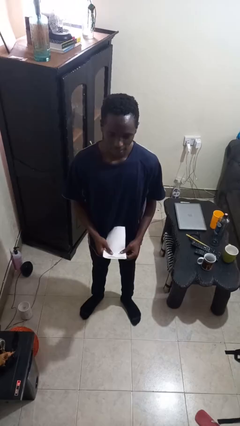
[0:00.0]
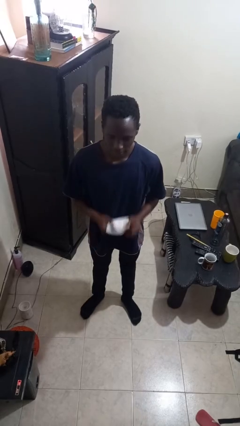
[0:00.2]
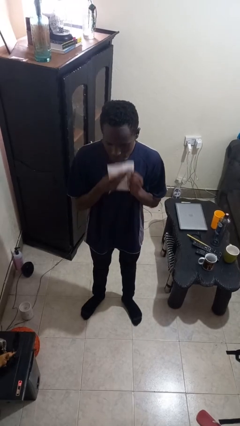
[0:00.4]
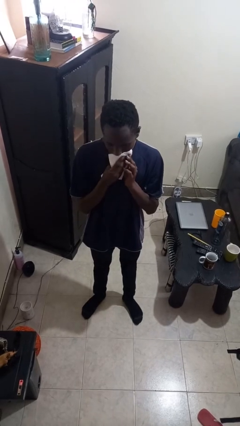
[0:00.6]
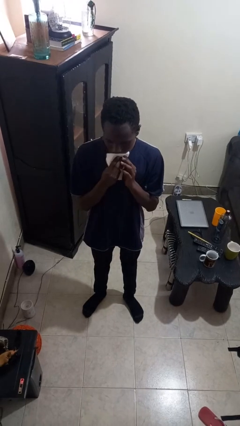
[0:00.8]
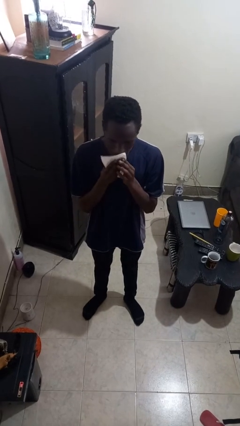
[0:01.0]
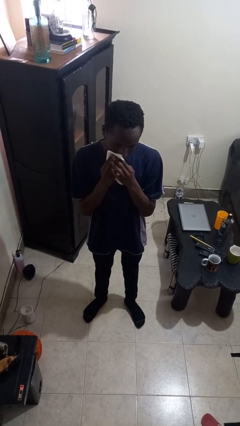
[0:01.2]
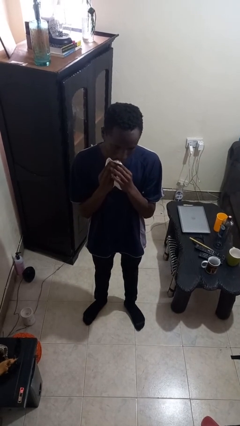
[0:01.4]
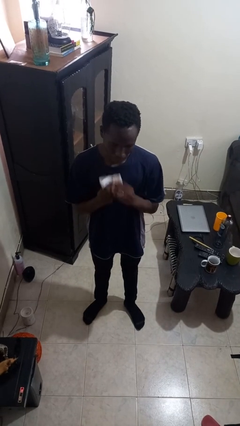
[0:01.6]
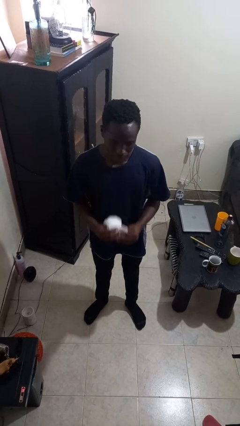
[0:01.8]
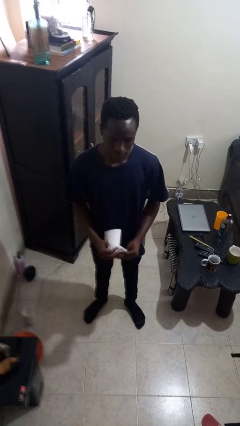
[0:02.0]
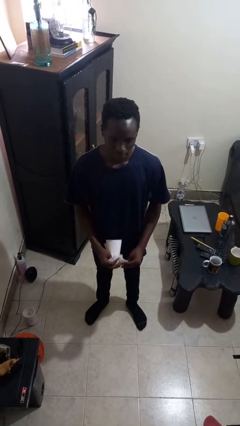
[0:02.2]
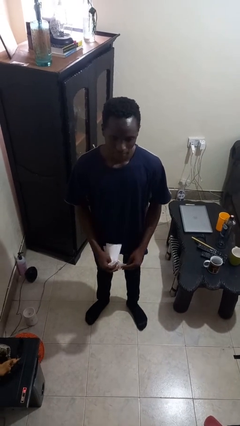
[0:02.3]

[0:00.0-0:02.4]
person wipes mouth with napkin

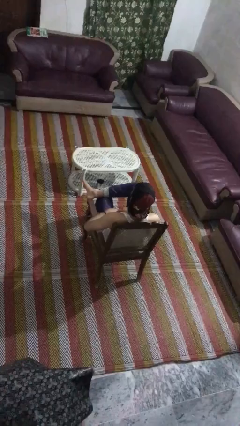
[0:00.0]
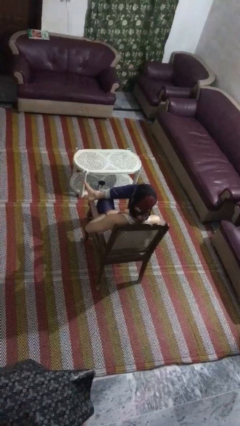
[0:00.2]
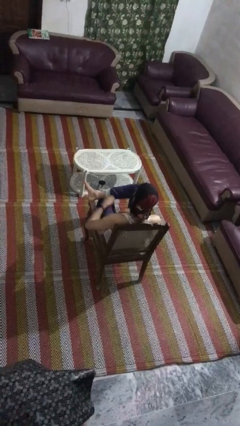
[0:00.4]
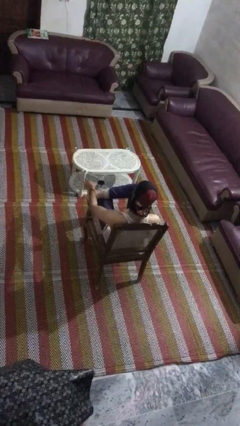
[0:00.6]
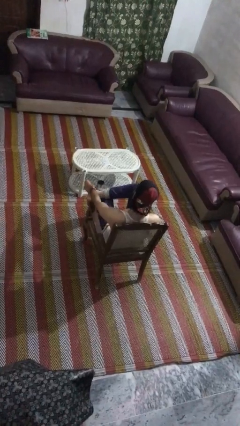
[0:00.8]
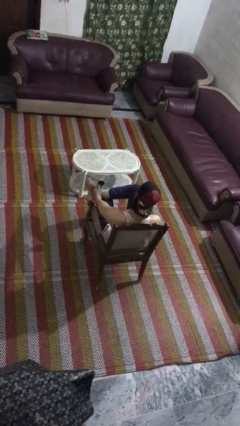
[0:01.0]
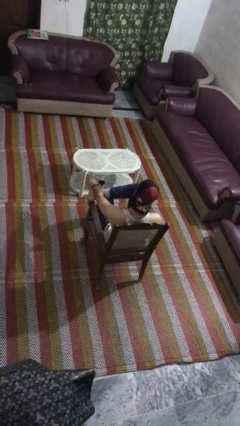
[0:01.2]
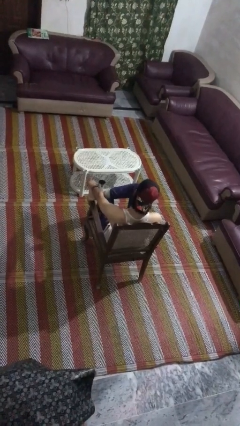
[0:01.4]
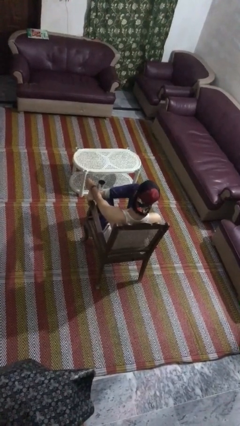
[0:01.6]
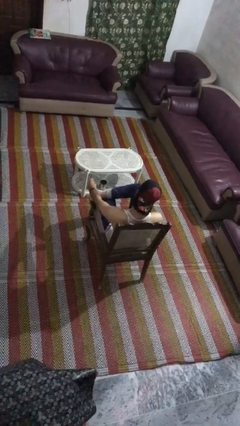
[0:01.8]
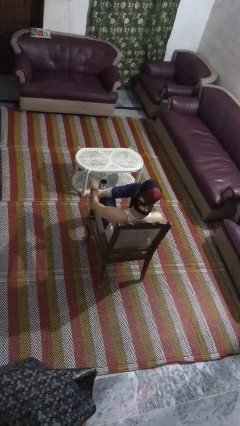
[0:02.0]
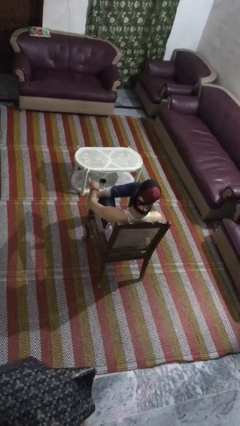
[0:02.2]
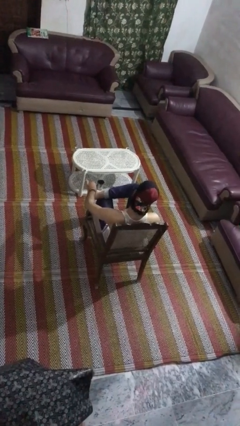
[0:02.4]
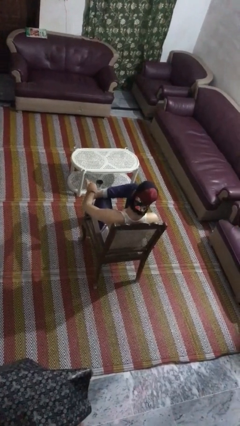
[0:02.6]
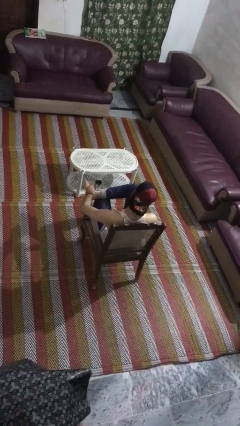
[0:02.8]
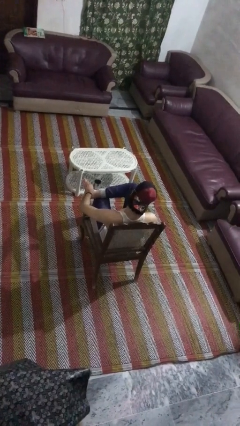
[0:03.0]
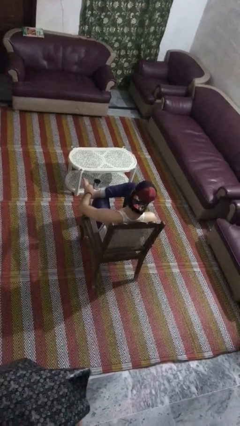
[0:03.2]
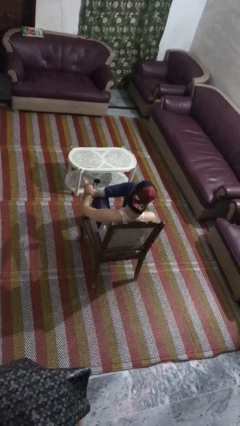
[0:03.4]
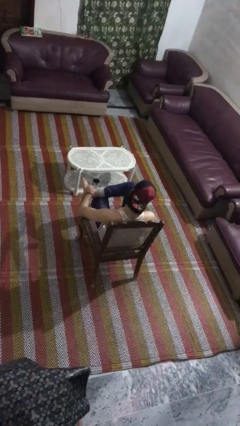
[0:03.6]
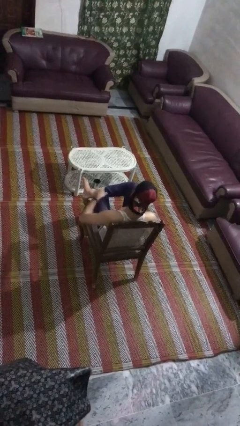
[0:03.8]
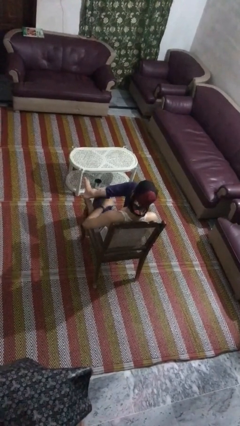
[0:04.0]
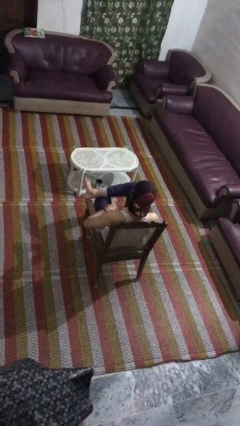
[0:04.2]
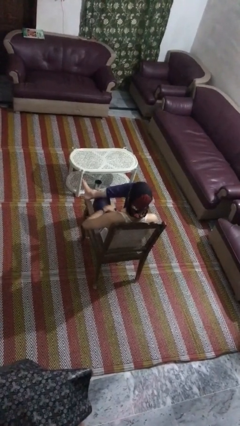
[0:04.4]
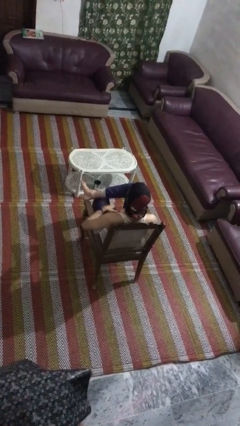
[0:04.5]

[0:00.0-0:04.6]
person rubs foot

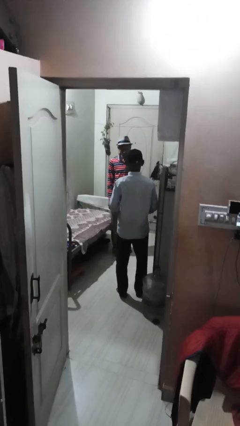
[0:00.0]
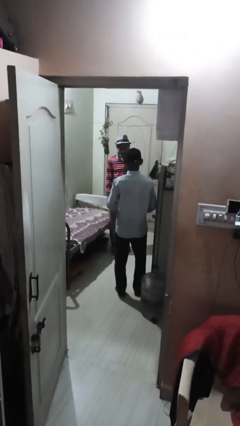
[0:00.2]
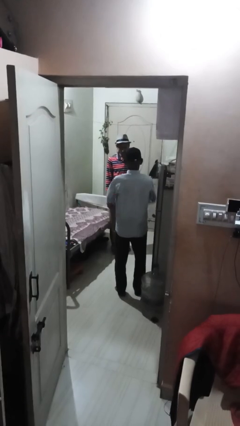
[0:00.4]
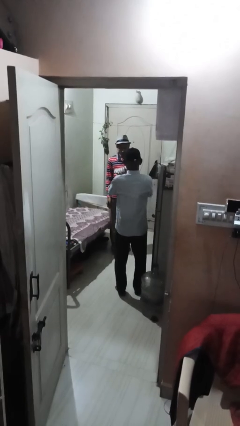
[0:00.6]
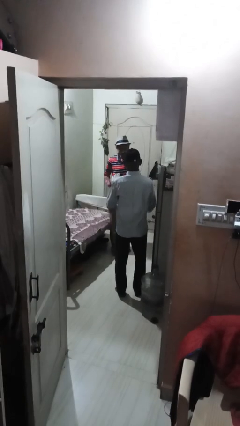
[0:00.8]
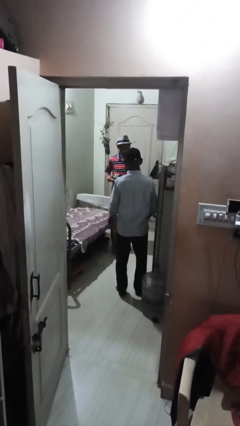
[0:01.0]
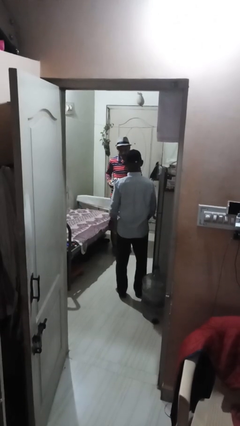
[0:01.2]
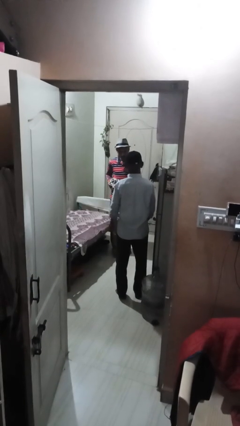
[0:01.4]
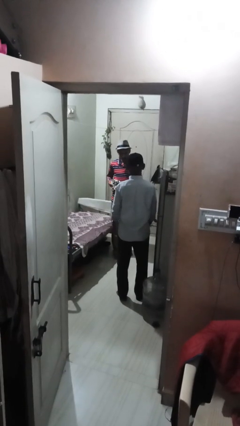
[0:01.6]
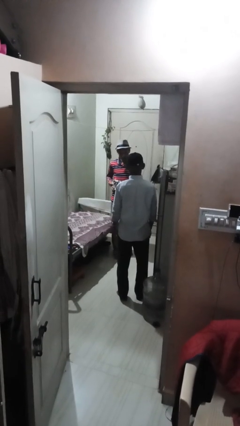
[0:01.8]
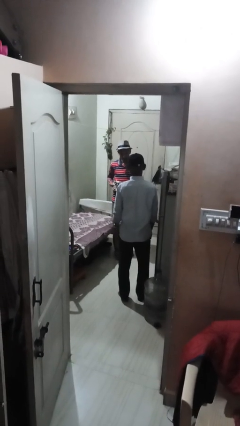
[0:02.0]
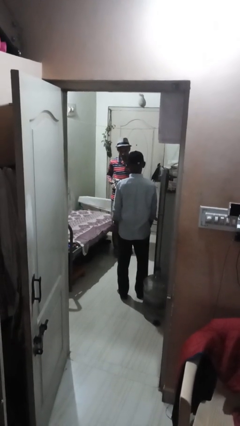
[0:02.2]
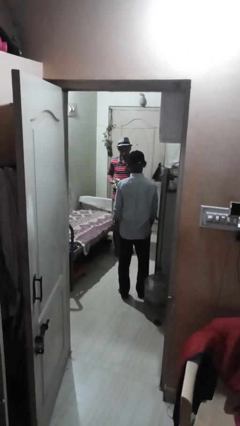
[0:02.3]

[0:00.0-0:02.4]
person catches object from person

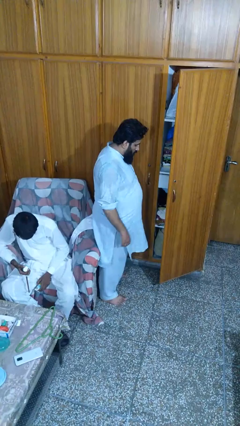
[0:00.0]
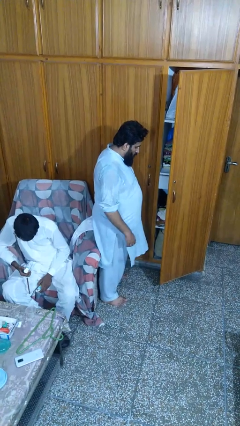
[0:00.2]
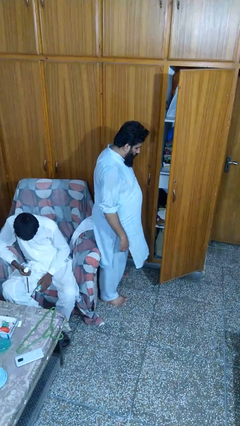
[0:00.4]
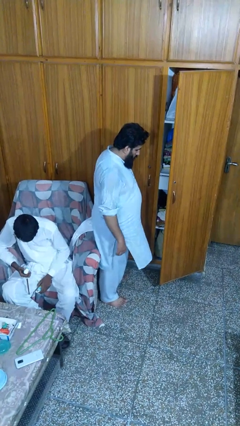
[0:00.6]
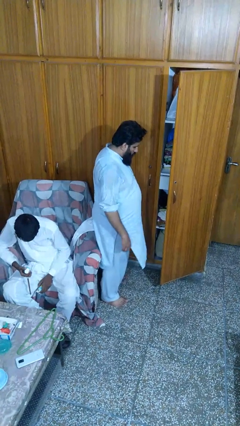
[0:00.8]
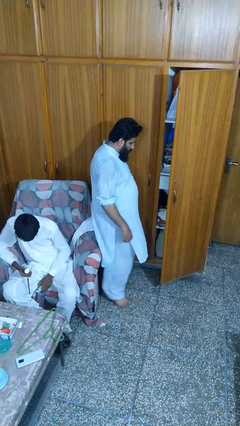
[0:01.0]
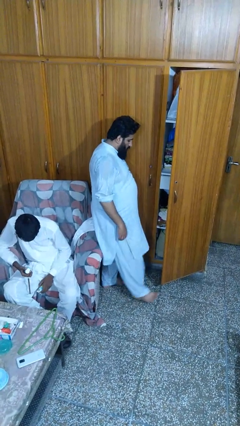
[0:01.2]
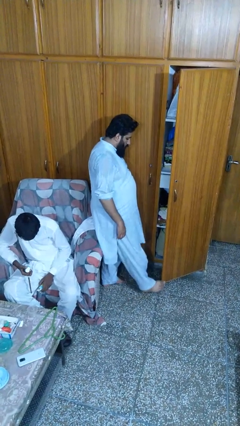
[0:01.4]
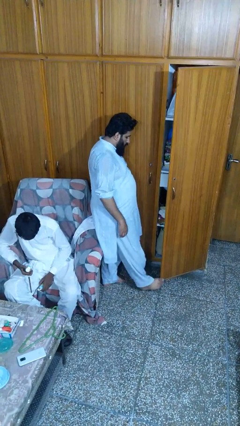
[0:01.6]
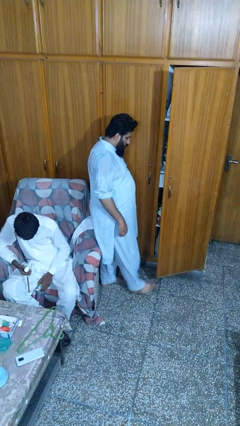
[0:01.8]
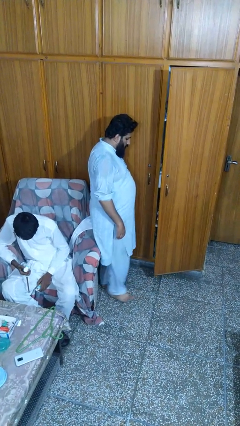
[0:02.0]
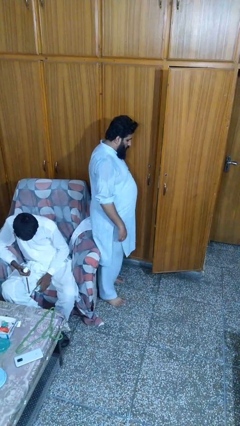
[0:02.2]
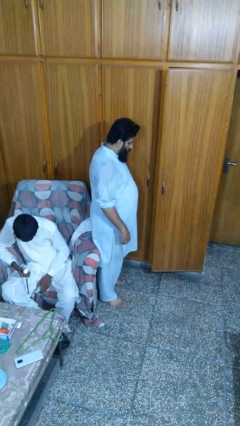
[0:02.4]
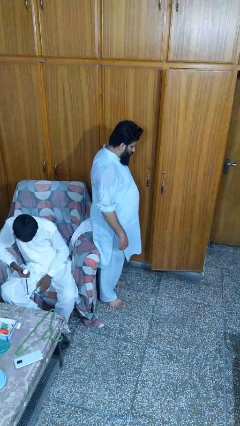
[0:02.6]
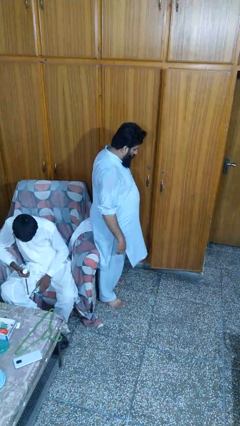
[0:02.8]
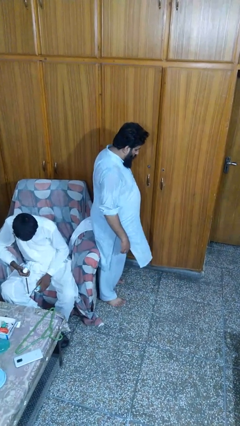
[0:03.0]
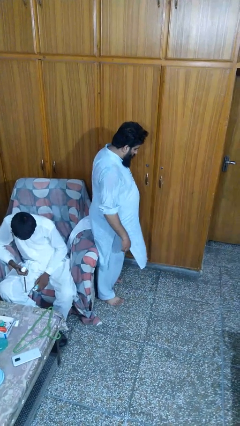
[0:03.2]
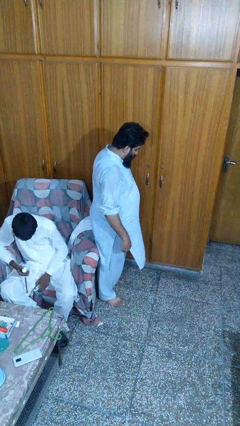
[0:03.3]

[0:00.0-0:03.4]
person closes door with foot

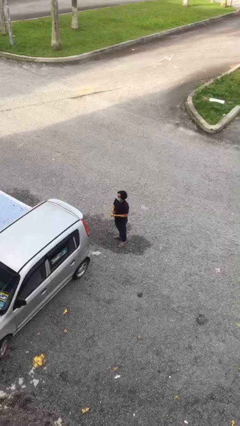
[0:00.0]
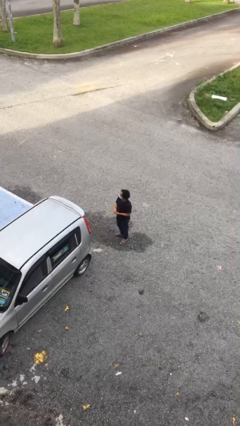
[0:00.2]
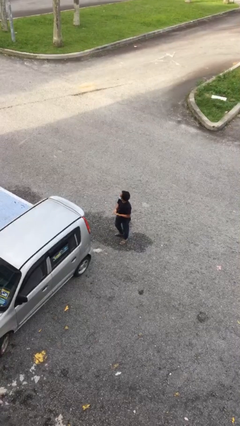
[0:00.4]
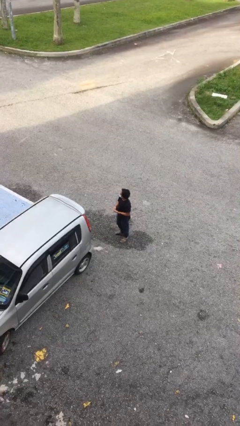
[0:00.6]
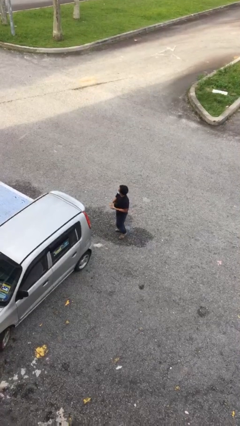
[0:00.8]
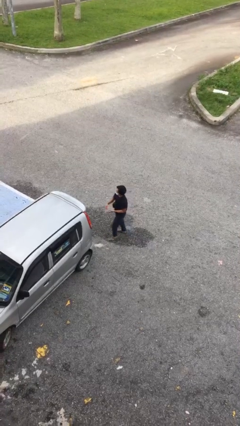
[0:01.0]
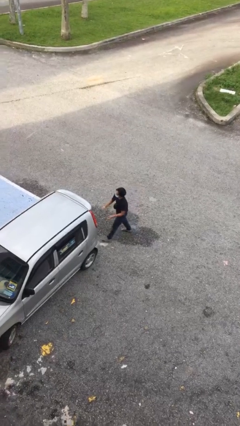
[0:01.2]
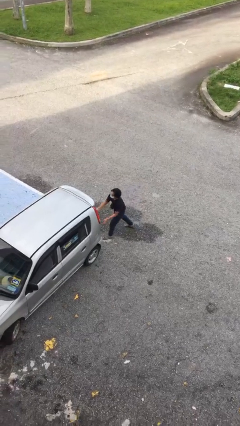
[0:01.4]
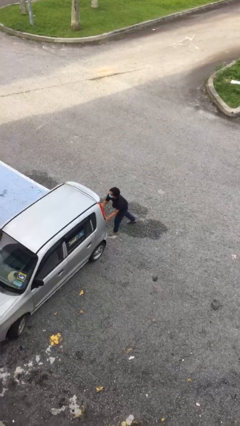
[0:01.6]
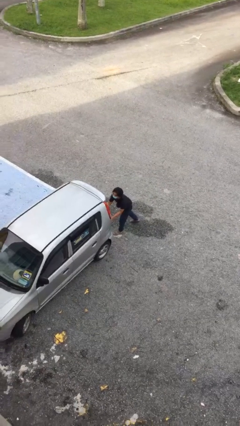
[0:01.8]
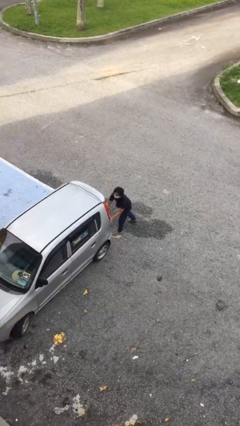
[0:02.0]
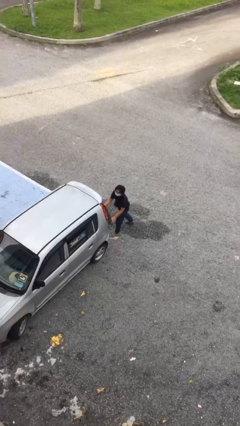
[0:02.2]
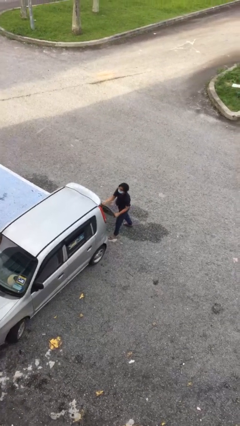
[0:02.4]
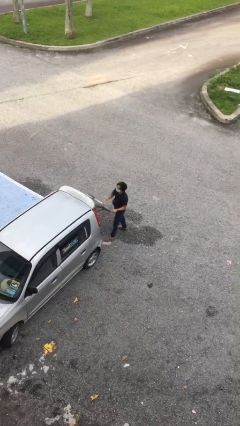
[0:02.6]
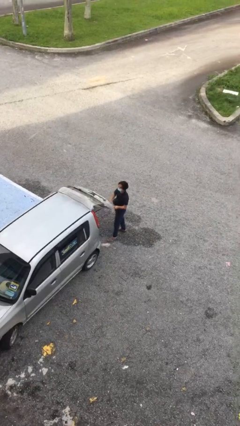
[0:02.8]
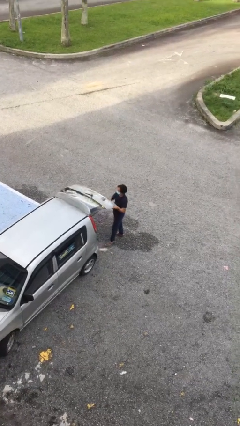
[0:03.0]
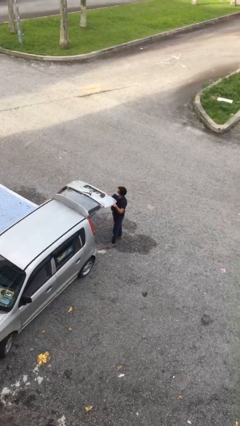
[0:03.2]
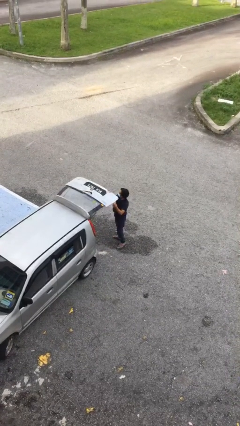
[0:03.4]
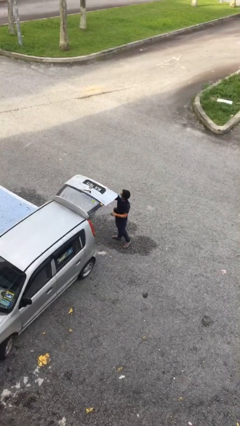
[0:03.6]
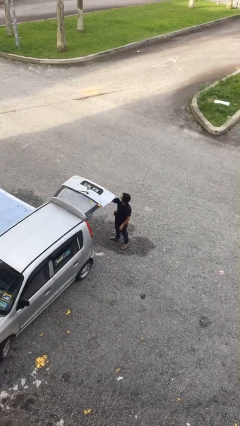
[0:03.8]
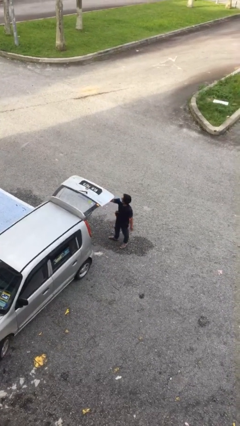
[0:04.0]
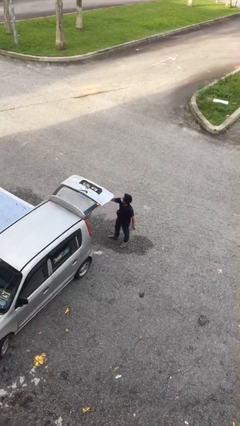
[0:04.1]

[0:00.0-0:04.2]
person opens car trunk

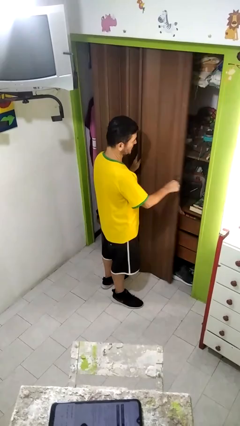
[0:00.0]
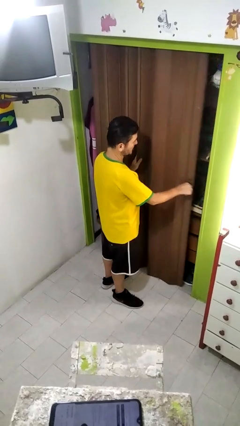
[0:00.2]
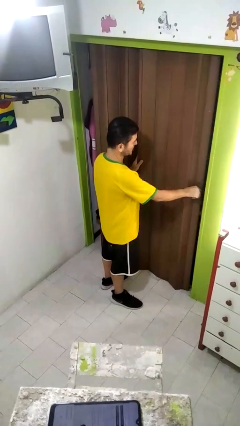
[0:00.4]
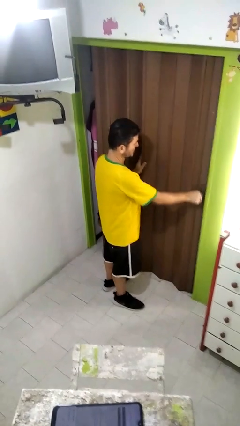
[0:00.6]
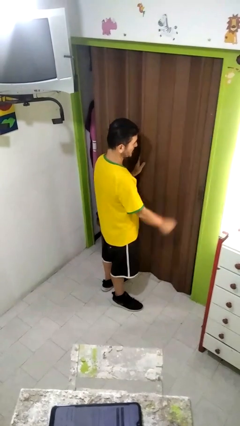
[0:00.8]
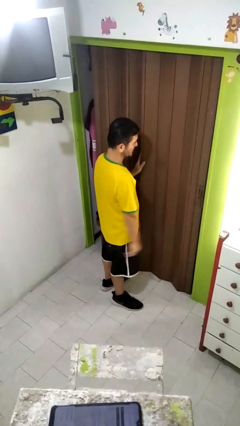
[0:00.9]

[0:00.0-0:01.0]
person closes closet door
